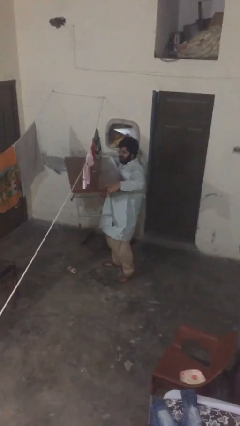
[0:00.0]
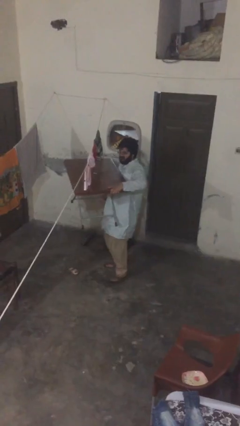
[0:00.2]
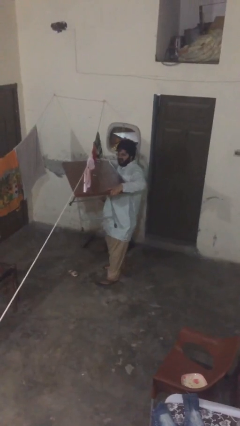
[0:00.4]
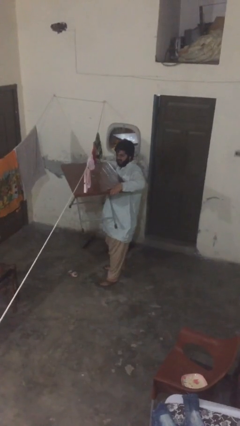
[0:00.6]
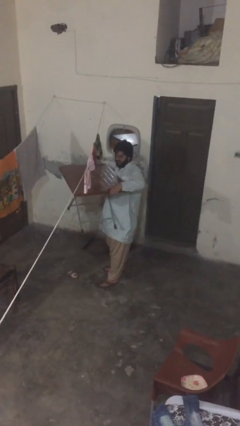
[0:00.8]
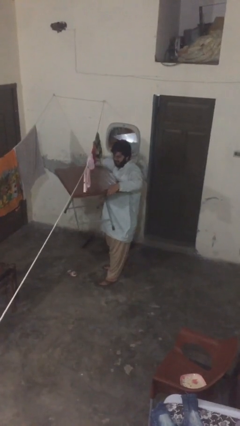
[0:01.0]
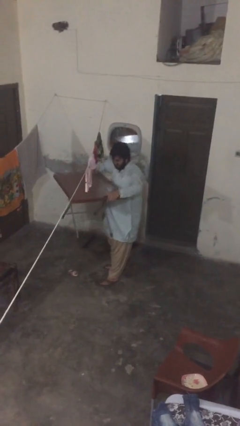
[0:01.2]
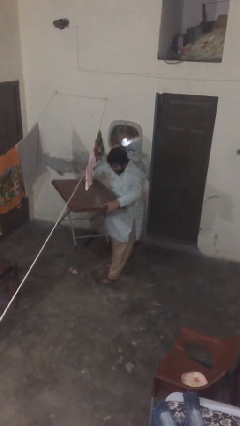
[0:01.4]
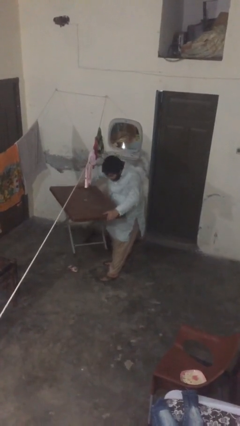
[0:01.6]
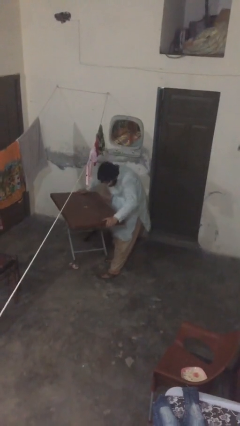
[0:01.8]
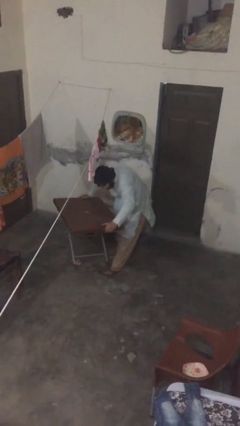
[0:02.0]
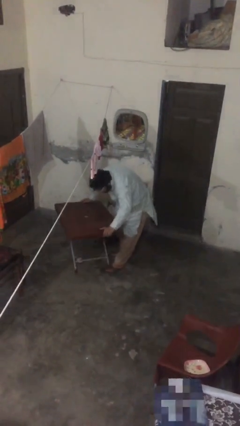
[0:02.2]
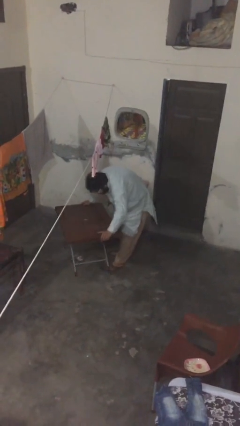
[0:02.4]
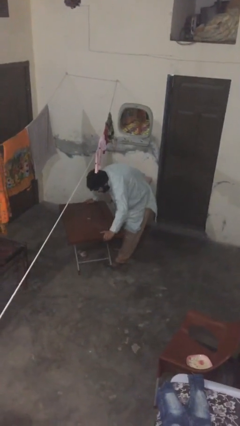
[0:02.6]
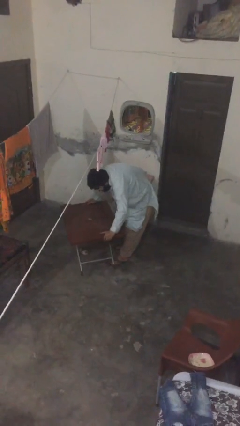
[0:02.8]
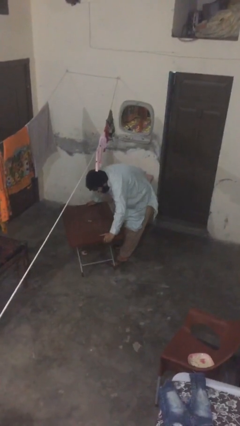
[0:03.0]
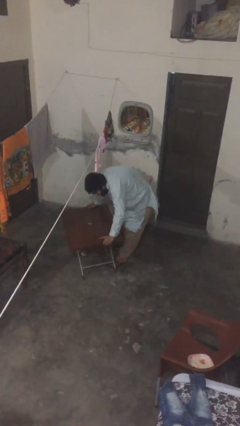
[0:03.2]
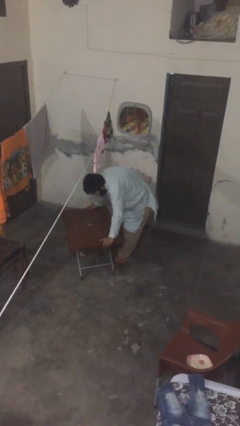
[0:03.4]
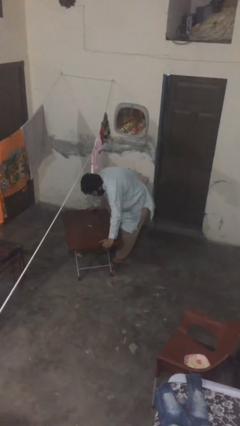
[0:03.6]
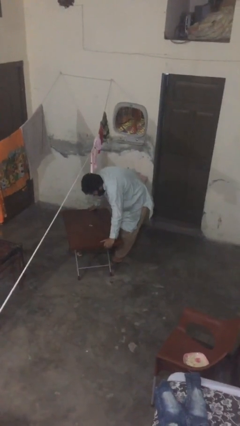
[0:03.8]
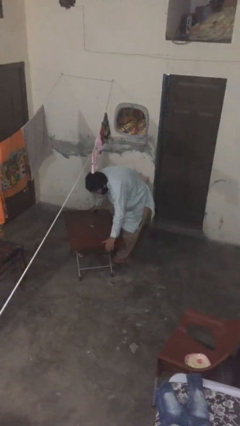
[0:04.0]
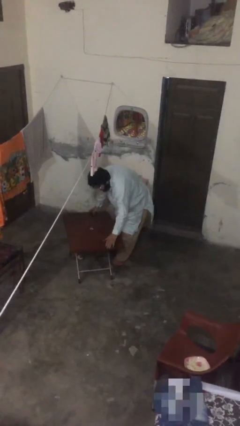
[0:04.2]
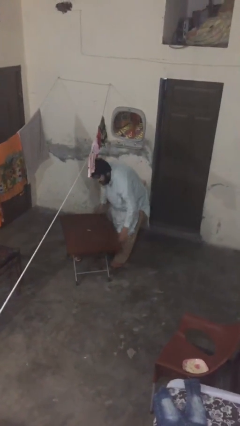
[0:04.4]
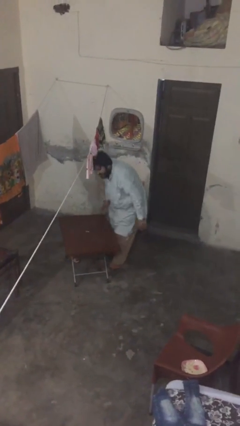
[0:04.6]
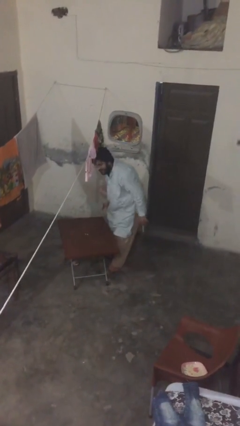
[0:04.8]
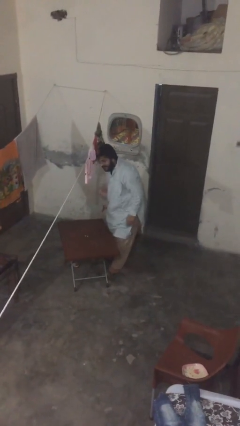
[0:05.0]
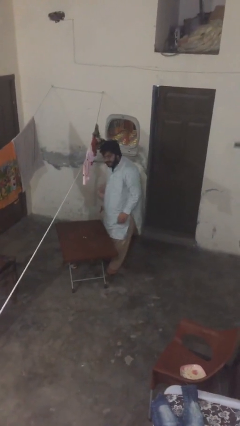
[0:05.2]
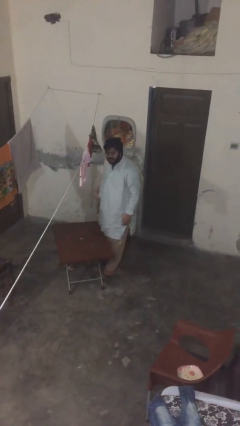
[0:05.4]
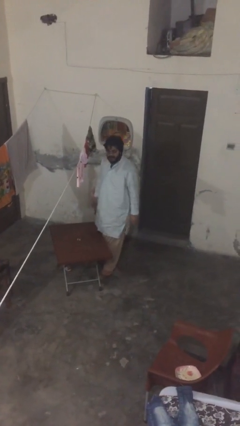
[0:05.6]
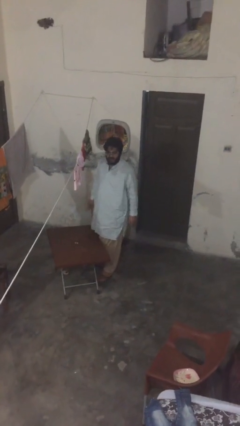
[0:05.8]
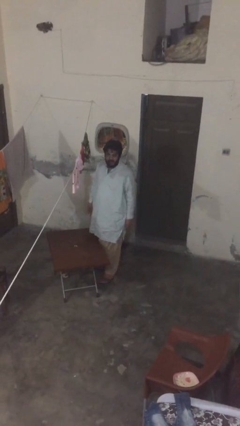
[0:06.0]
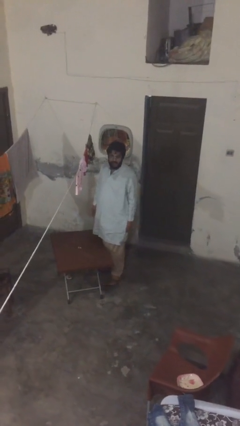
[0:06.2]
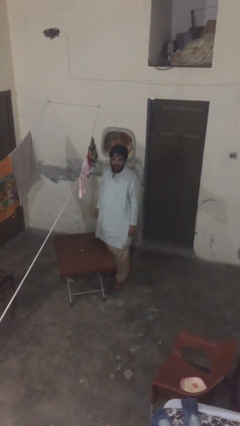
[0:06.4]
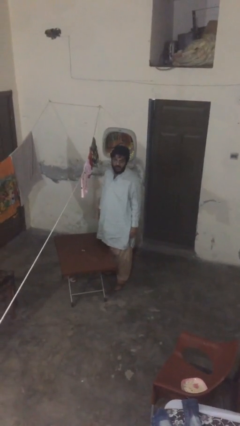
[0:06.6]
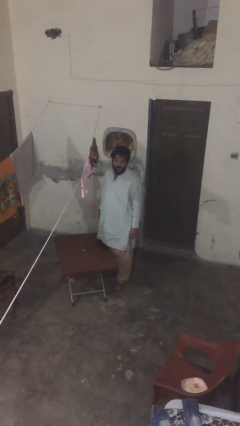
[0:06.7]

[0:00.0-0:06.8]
person puts down object on floor

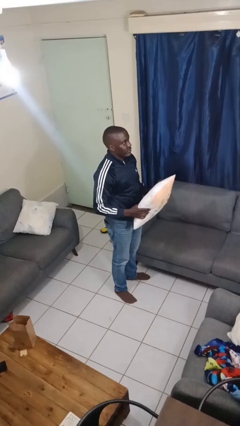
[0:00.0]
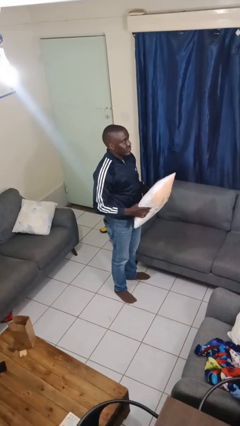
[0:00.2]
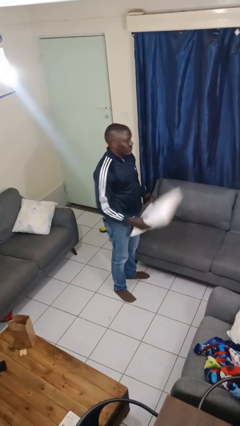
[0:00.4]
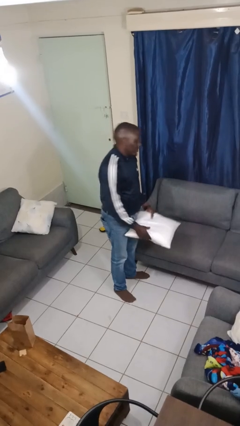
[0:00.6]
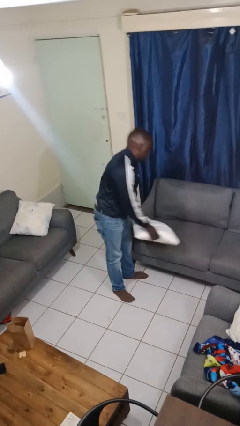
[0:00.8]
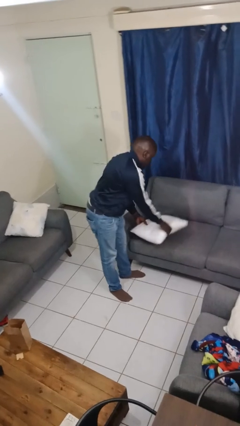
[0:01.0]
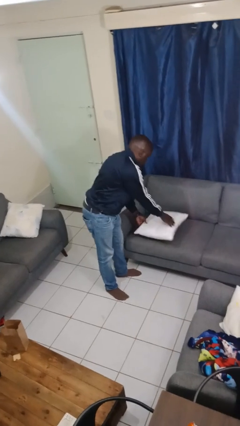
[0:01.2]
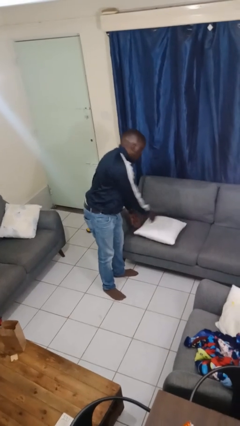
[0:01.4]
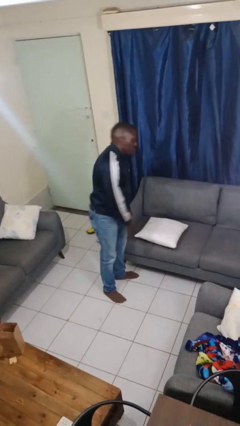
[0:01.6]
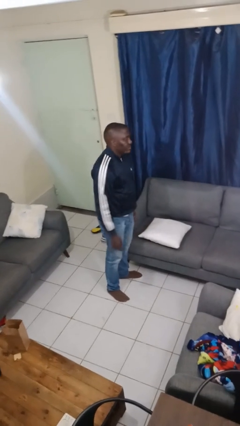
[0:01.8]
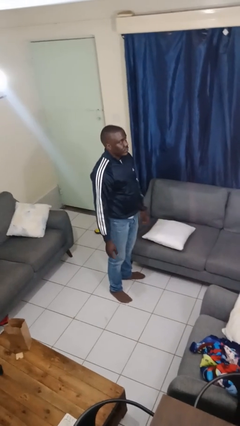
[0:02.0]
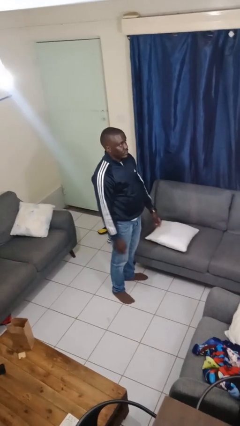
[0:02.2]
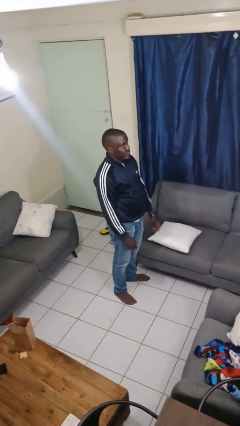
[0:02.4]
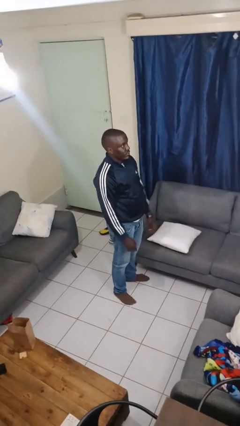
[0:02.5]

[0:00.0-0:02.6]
person puts down object on couch

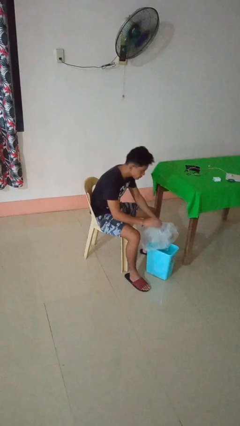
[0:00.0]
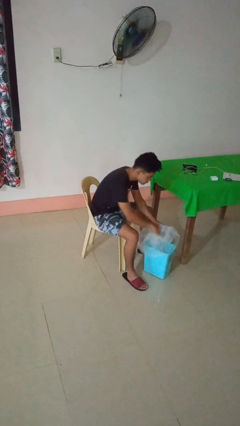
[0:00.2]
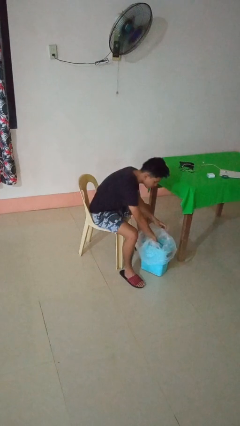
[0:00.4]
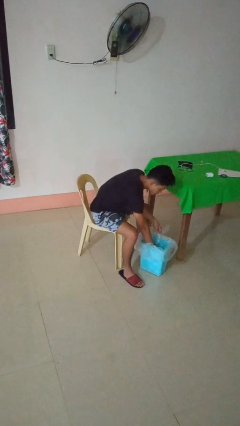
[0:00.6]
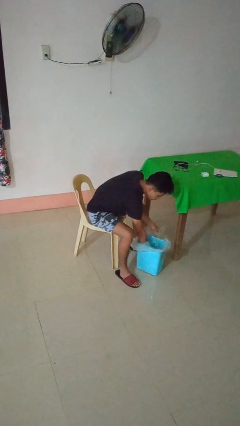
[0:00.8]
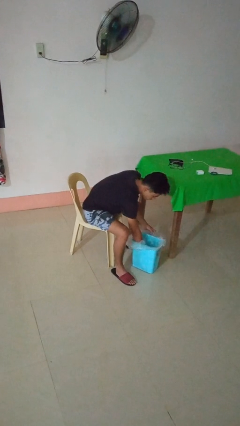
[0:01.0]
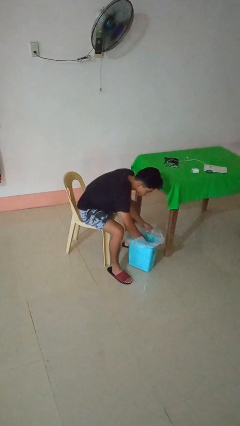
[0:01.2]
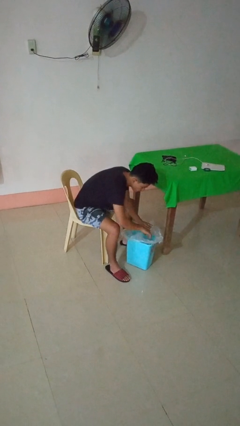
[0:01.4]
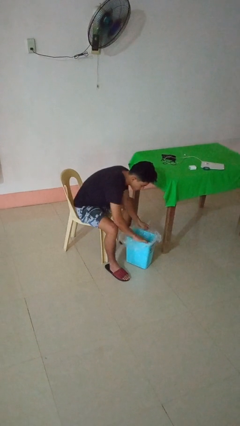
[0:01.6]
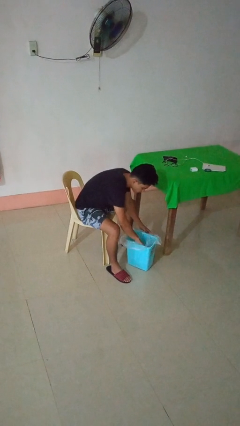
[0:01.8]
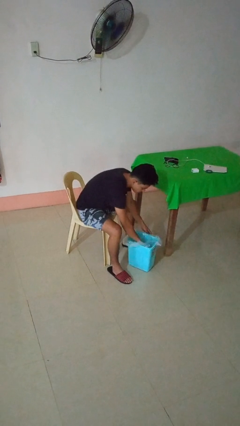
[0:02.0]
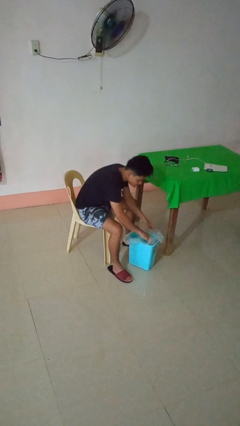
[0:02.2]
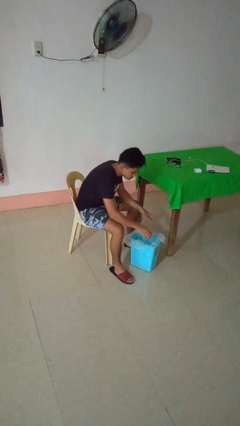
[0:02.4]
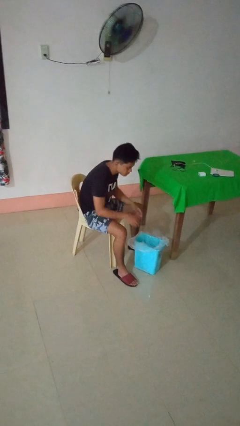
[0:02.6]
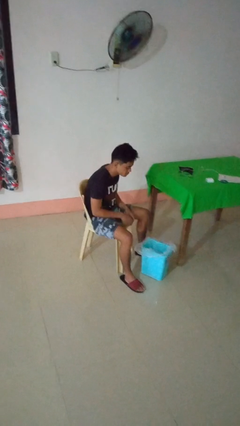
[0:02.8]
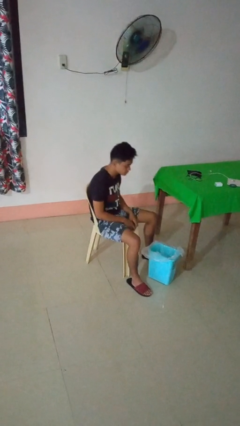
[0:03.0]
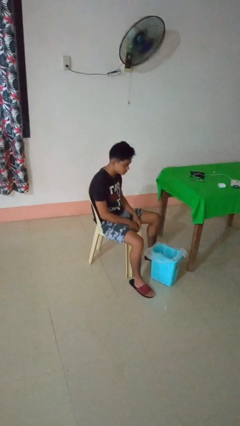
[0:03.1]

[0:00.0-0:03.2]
person inserts trashbag into trashcan

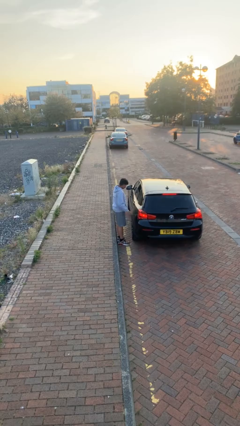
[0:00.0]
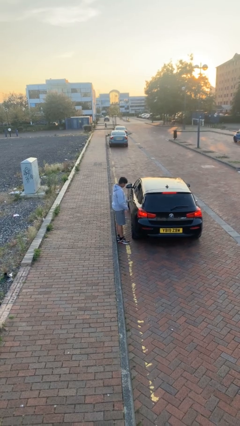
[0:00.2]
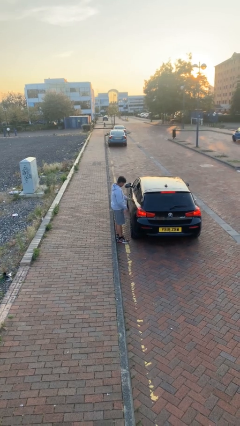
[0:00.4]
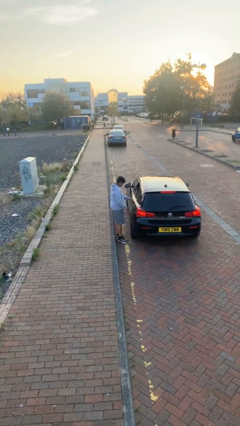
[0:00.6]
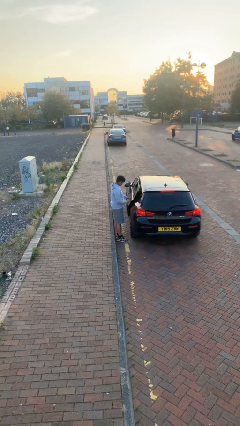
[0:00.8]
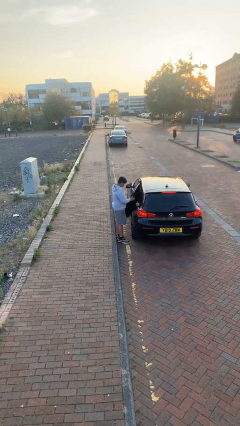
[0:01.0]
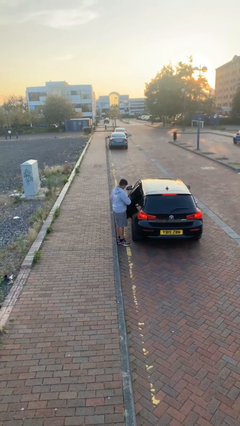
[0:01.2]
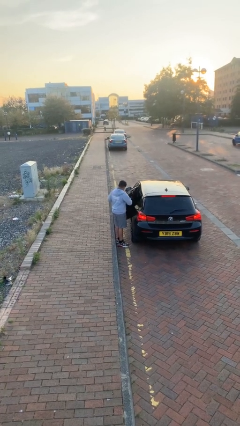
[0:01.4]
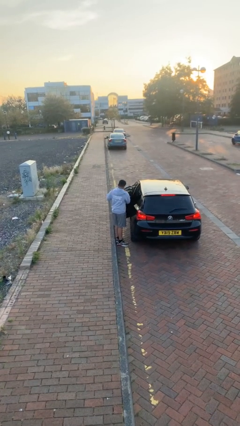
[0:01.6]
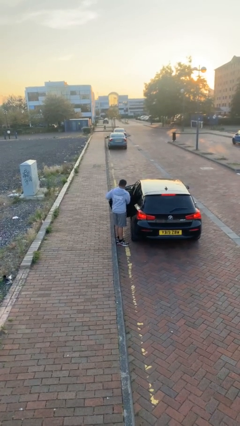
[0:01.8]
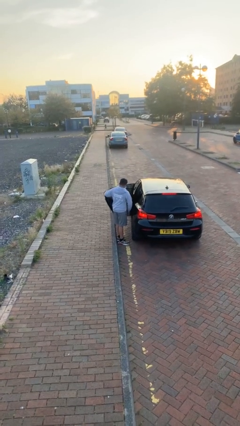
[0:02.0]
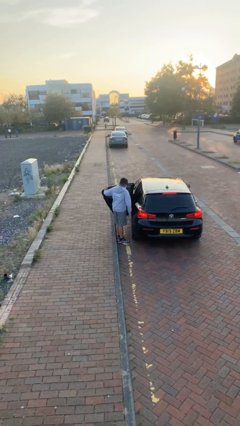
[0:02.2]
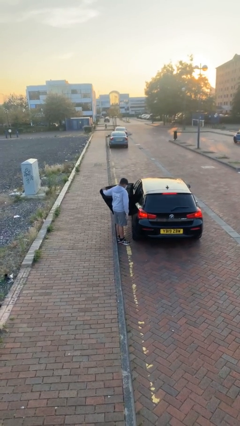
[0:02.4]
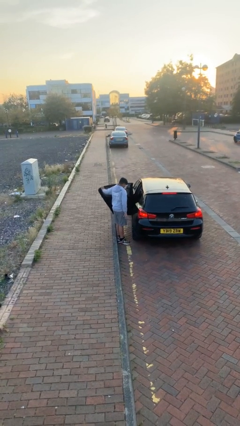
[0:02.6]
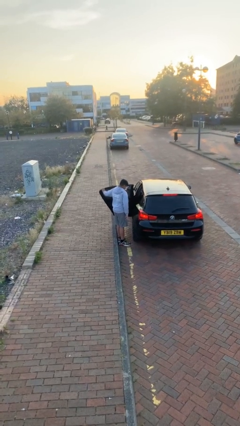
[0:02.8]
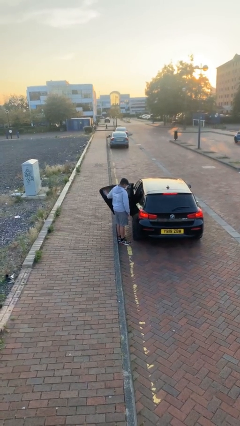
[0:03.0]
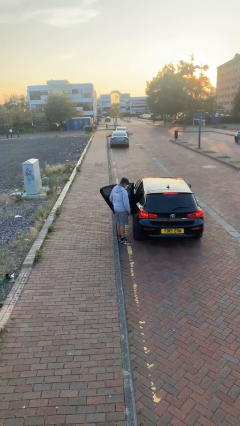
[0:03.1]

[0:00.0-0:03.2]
person opens car door

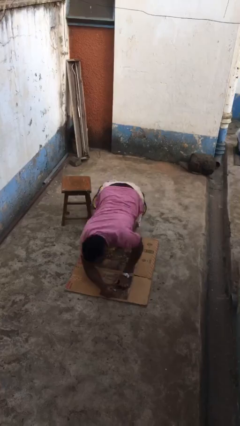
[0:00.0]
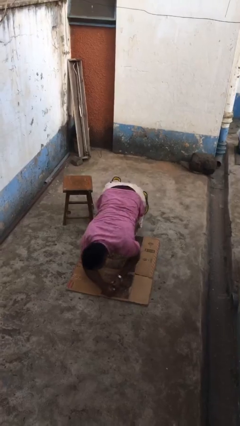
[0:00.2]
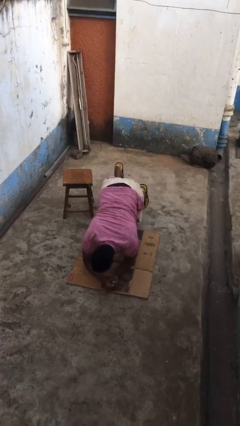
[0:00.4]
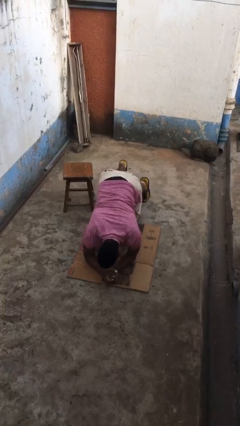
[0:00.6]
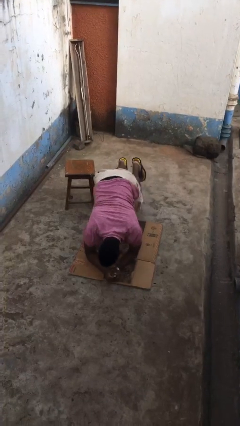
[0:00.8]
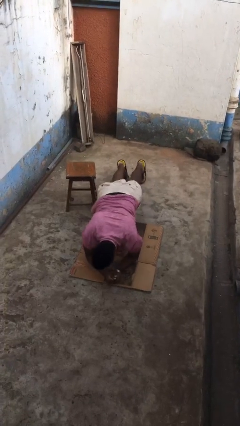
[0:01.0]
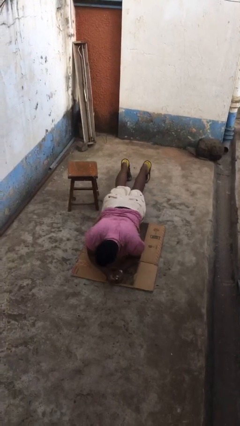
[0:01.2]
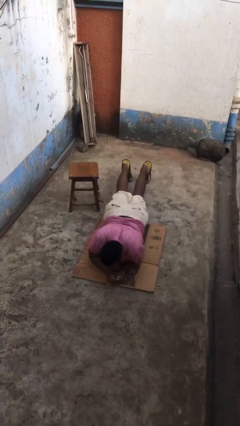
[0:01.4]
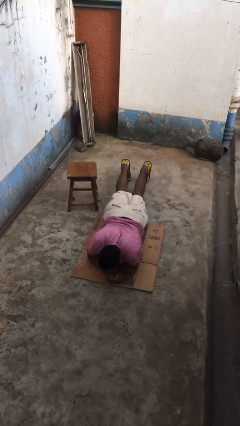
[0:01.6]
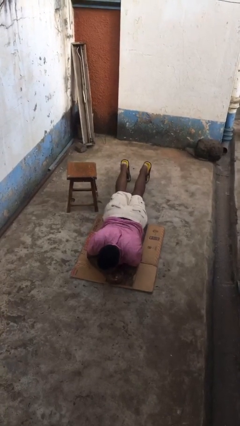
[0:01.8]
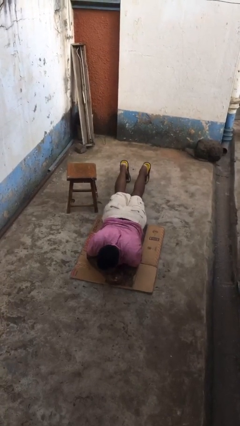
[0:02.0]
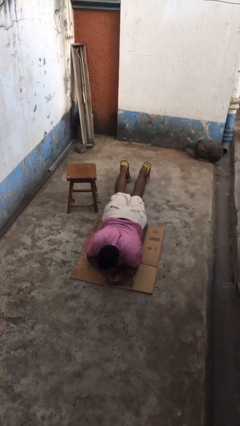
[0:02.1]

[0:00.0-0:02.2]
person lies down on floor
